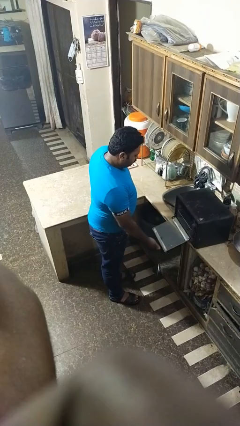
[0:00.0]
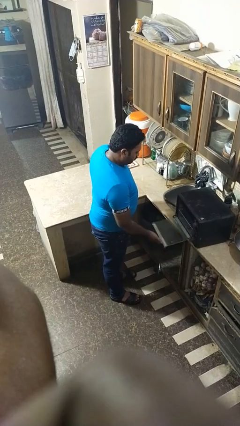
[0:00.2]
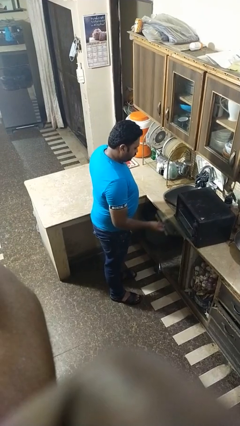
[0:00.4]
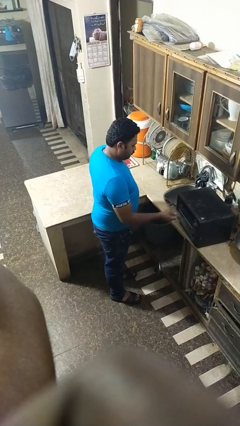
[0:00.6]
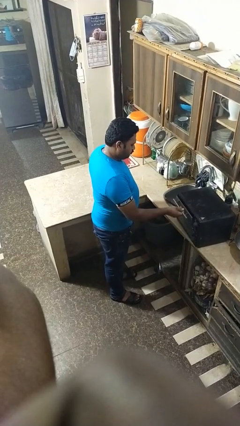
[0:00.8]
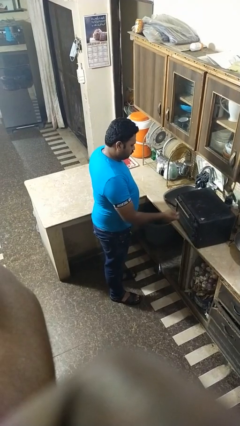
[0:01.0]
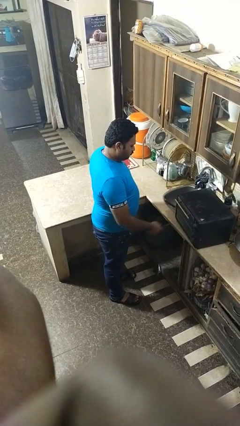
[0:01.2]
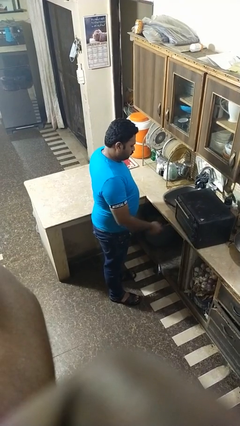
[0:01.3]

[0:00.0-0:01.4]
person closes oven door

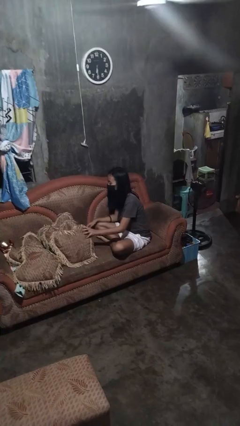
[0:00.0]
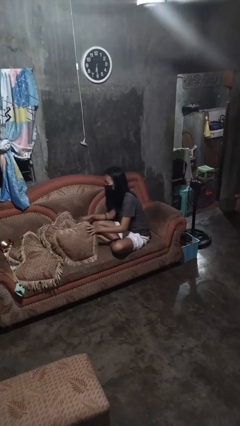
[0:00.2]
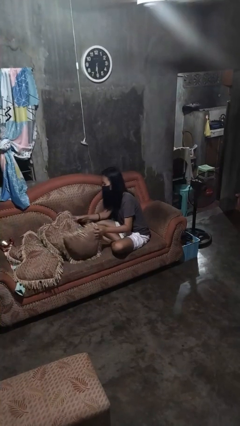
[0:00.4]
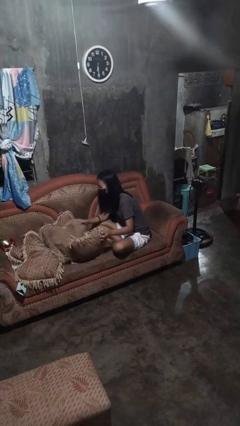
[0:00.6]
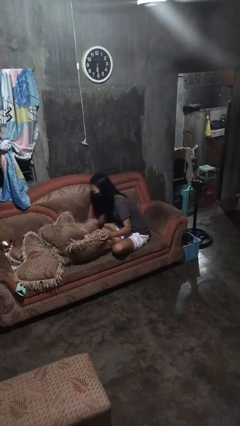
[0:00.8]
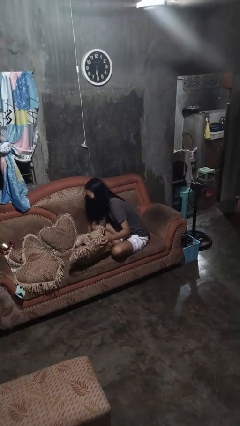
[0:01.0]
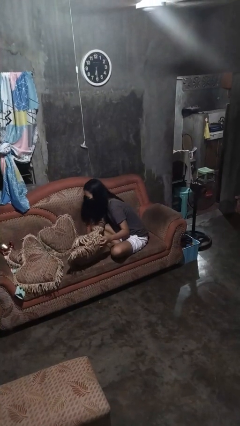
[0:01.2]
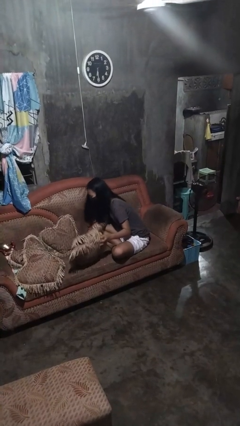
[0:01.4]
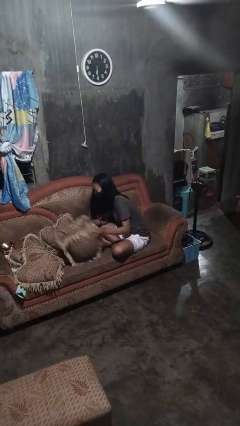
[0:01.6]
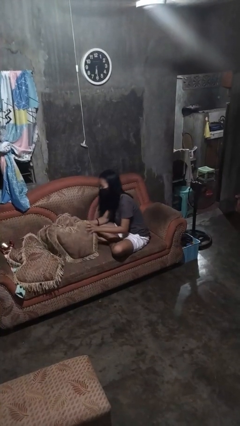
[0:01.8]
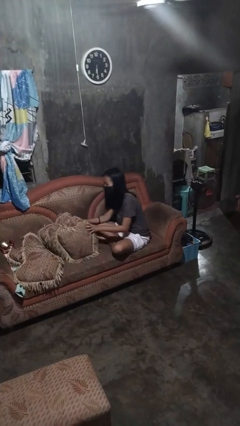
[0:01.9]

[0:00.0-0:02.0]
person searches in couch

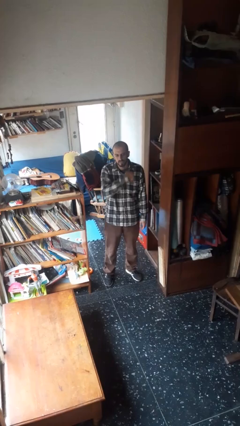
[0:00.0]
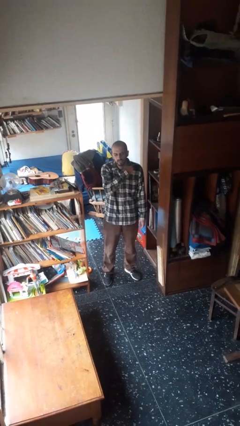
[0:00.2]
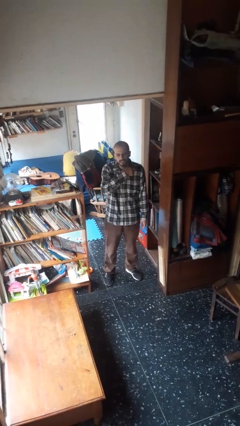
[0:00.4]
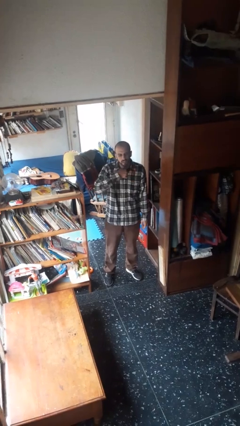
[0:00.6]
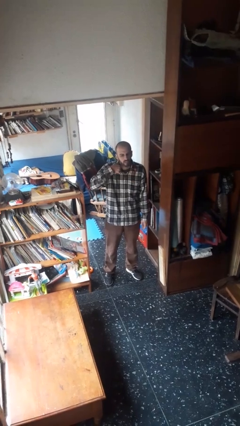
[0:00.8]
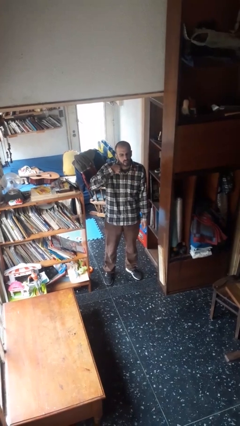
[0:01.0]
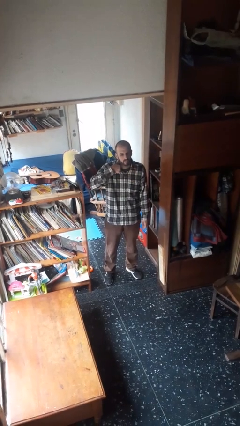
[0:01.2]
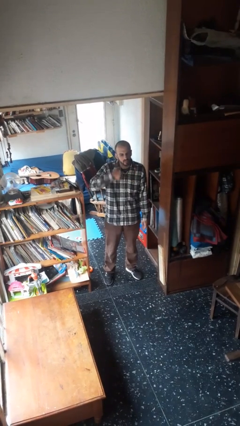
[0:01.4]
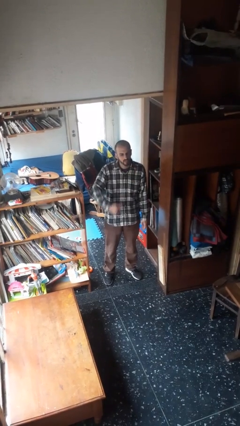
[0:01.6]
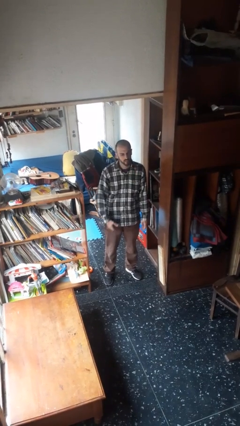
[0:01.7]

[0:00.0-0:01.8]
person gestures cut

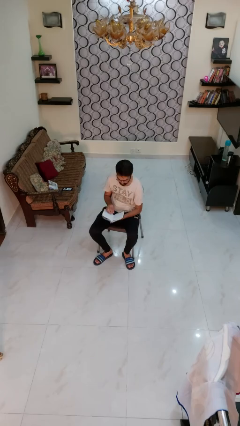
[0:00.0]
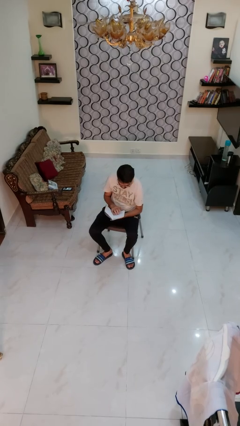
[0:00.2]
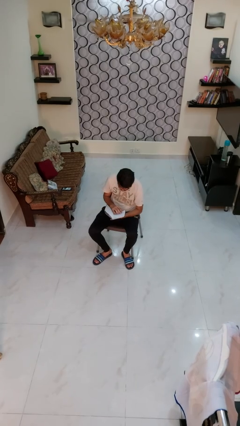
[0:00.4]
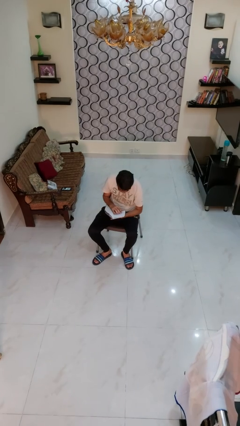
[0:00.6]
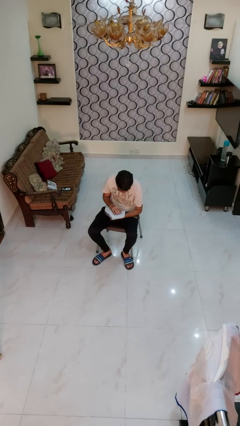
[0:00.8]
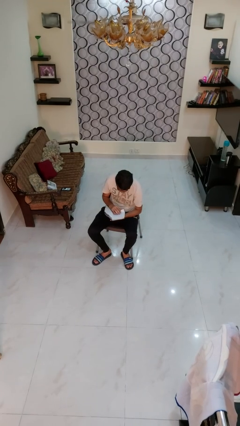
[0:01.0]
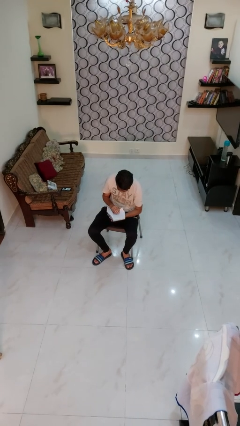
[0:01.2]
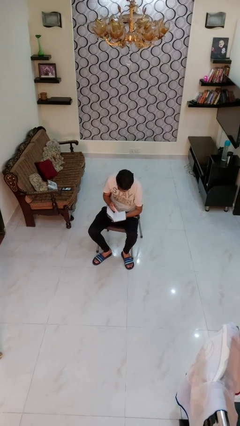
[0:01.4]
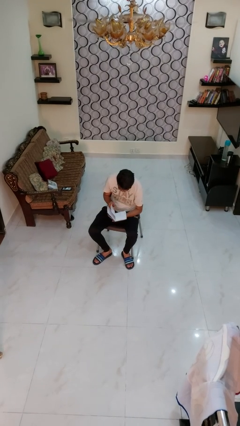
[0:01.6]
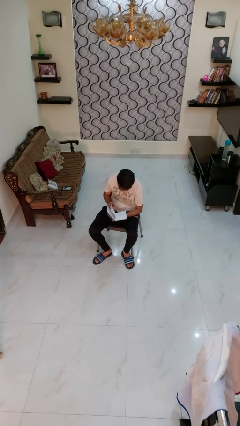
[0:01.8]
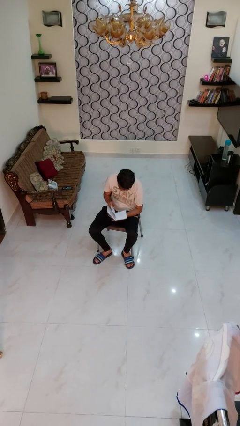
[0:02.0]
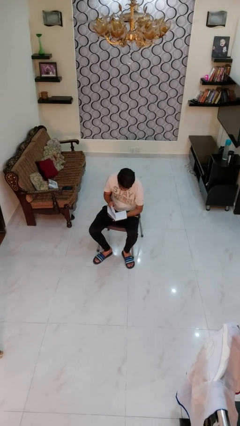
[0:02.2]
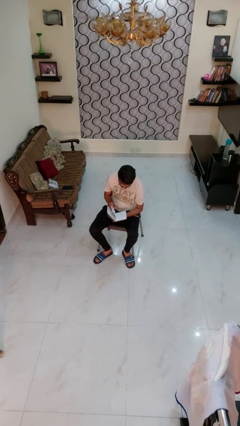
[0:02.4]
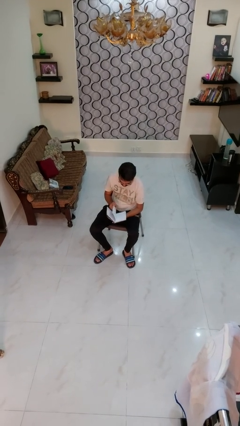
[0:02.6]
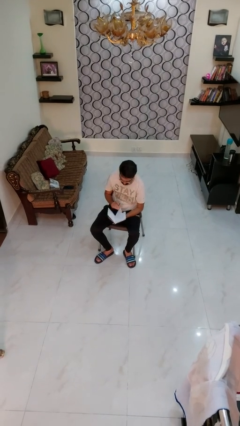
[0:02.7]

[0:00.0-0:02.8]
person reads book

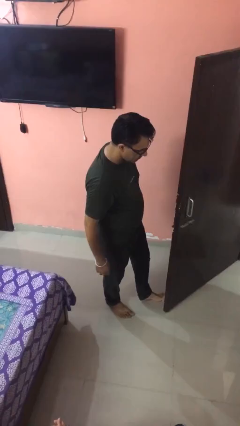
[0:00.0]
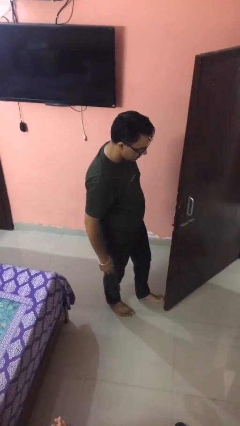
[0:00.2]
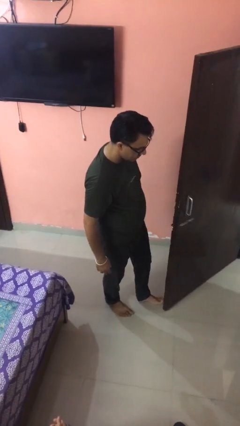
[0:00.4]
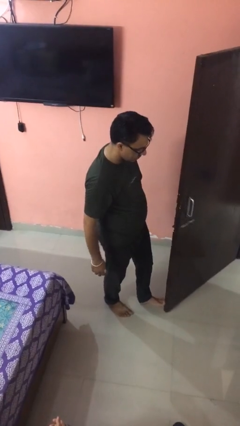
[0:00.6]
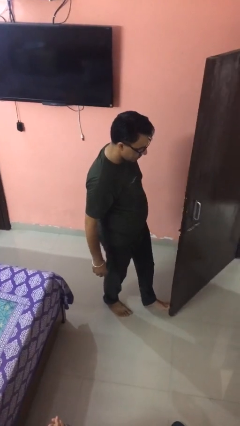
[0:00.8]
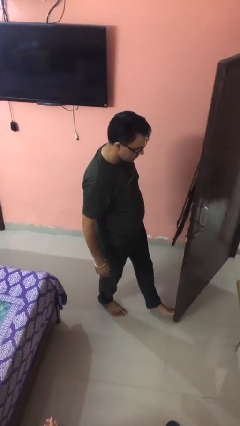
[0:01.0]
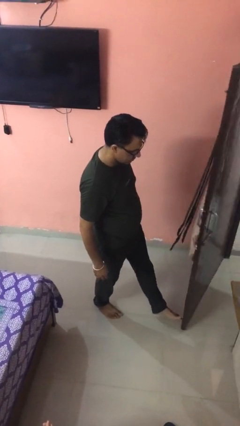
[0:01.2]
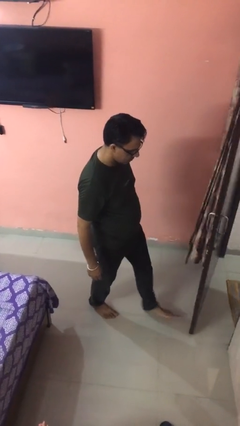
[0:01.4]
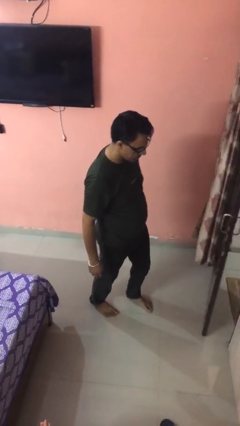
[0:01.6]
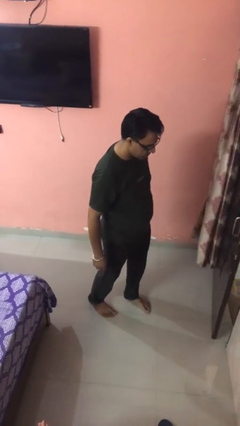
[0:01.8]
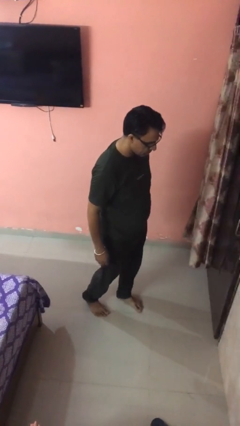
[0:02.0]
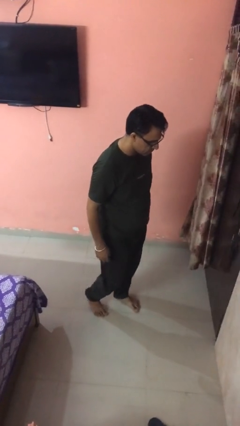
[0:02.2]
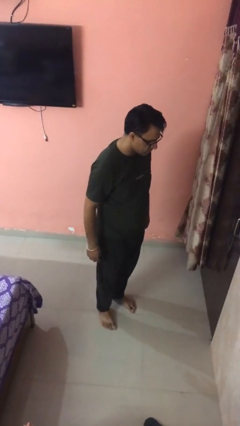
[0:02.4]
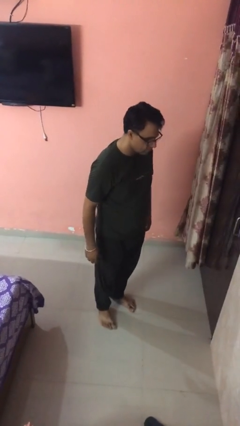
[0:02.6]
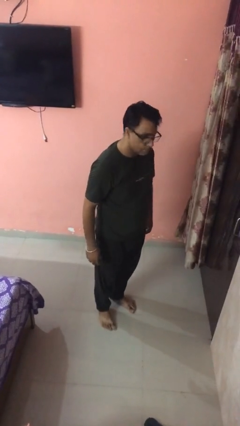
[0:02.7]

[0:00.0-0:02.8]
person closes door with foot

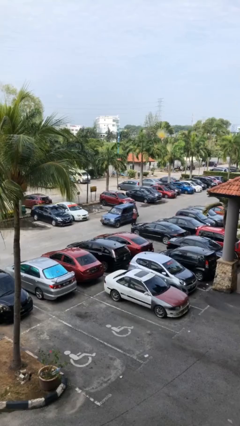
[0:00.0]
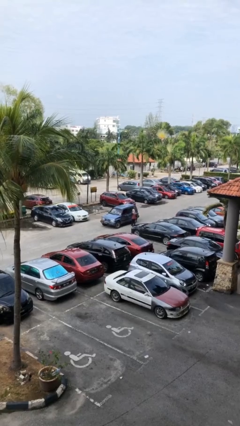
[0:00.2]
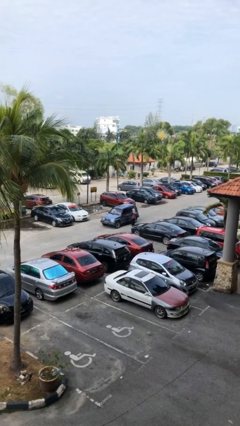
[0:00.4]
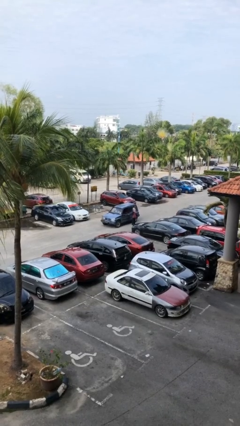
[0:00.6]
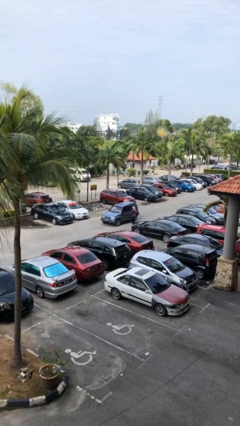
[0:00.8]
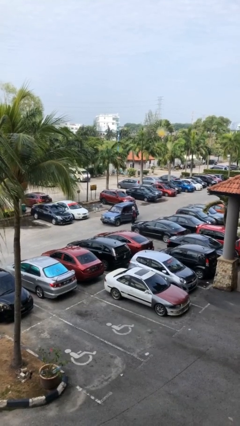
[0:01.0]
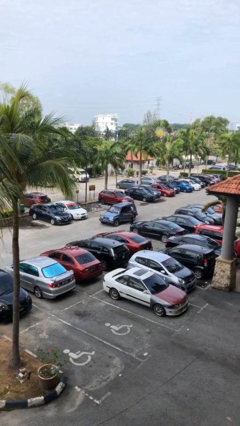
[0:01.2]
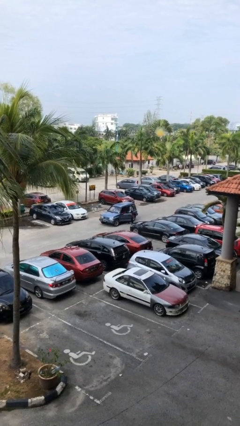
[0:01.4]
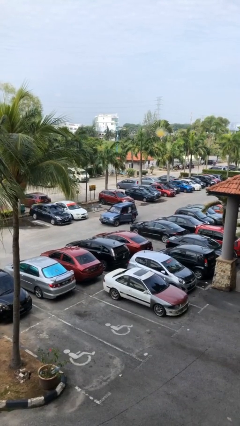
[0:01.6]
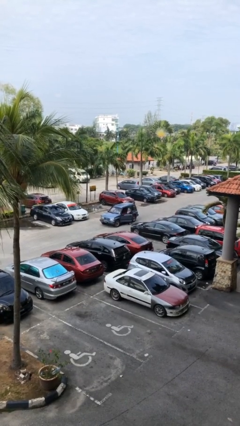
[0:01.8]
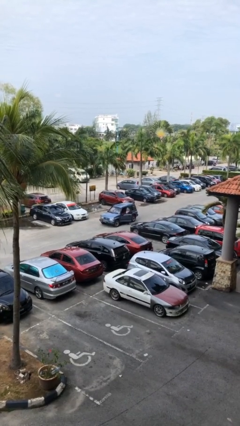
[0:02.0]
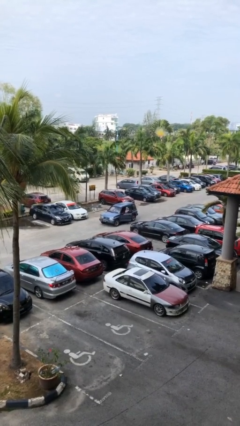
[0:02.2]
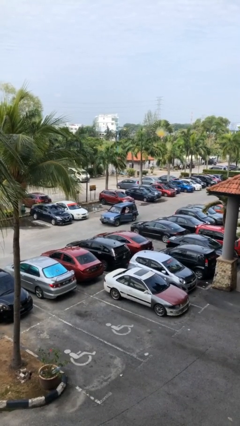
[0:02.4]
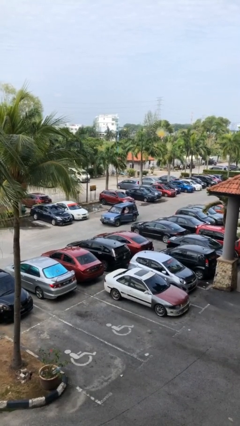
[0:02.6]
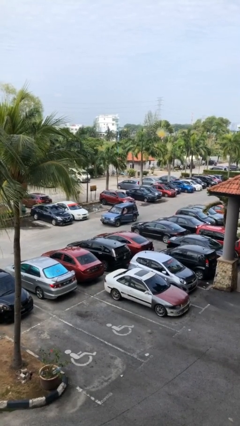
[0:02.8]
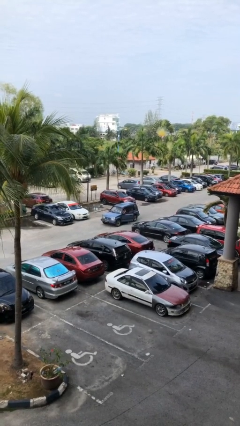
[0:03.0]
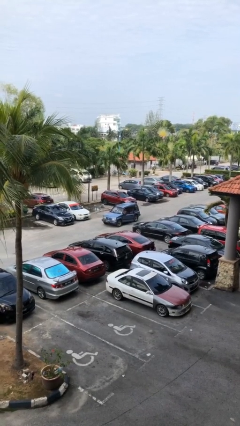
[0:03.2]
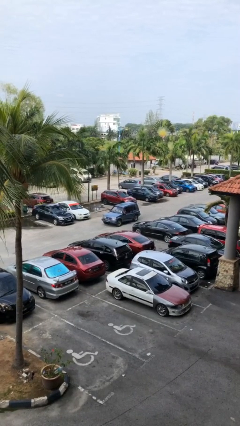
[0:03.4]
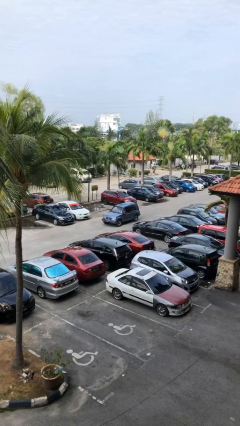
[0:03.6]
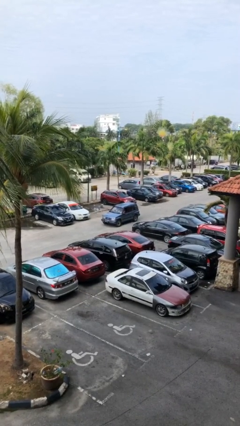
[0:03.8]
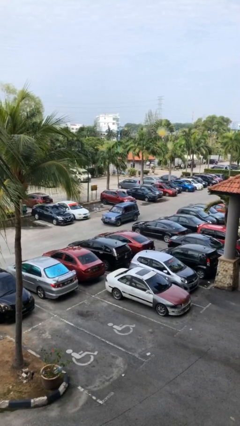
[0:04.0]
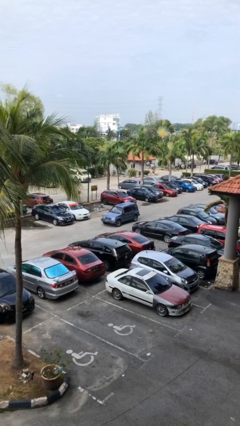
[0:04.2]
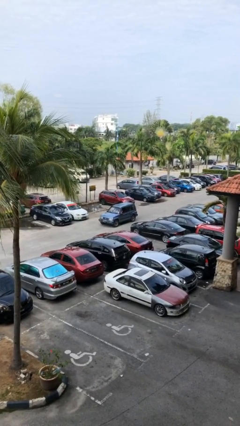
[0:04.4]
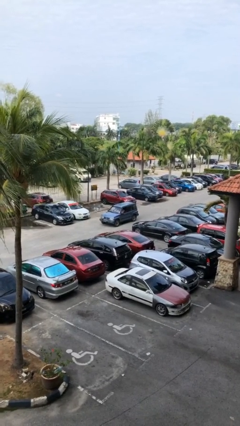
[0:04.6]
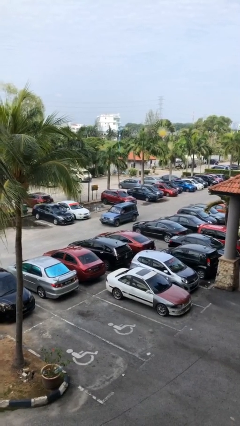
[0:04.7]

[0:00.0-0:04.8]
car picks up person

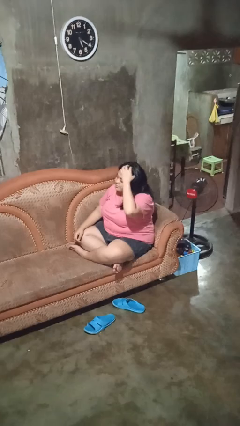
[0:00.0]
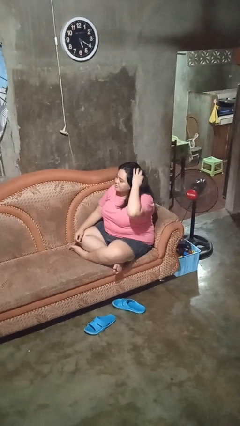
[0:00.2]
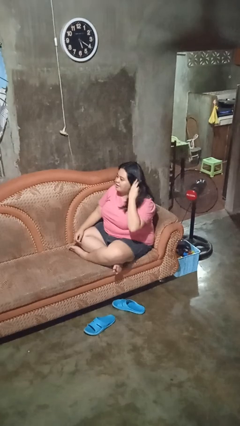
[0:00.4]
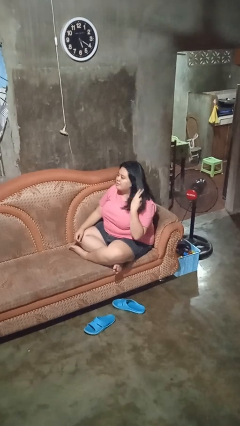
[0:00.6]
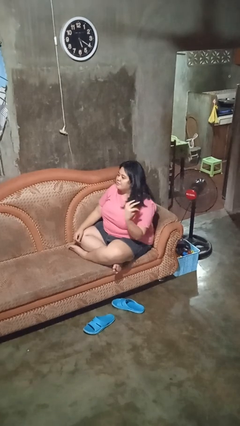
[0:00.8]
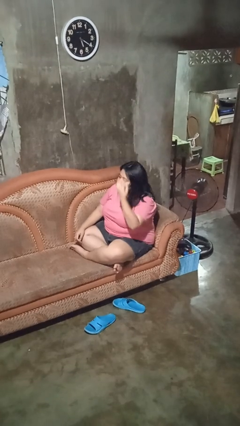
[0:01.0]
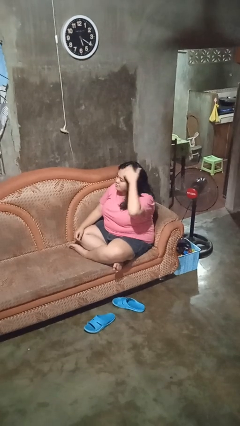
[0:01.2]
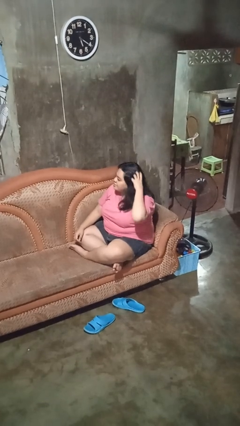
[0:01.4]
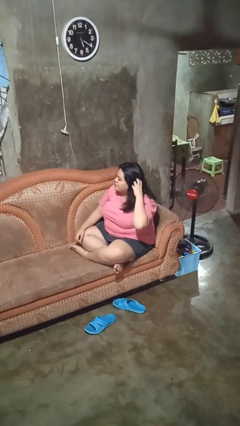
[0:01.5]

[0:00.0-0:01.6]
person strokes hair
